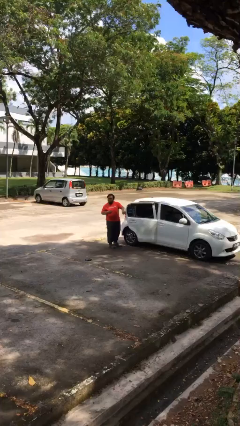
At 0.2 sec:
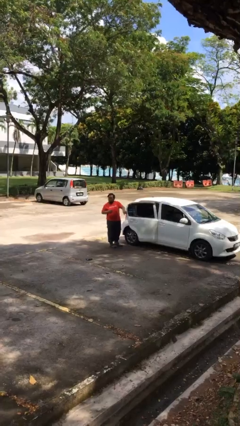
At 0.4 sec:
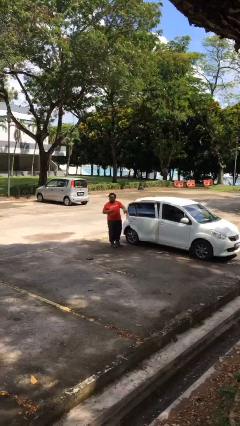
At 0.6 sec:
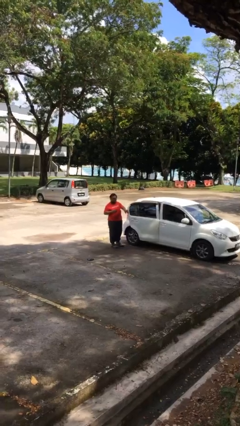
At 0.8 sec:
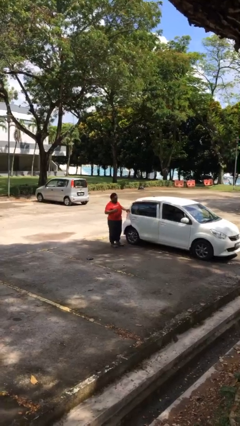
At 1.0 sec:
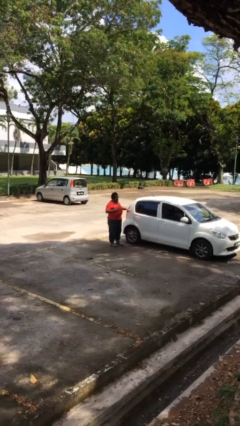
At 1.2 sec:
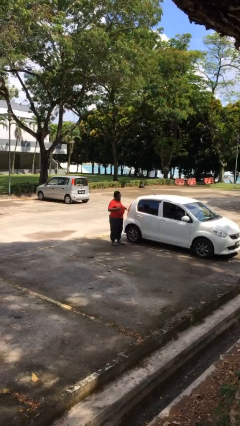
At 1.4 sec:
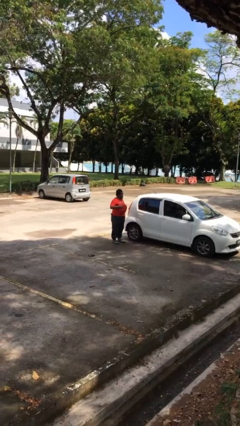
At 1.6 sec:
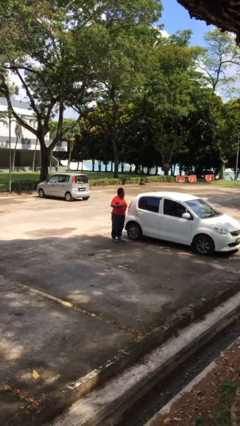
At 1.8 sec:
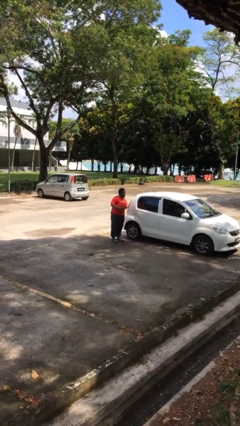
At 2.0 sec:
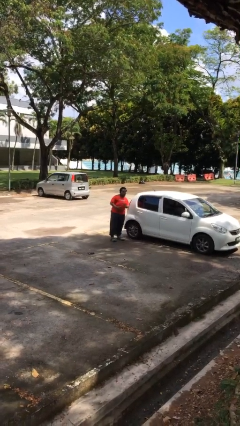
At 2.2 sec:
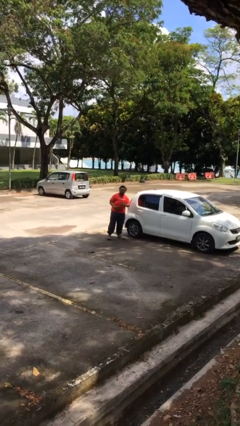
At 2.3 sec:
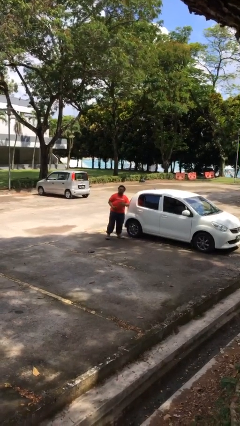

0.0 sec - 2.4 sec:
person closes car door

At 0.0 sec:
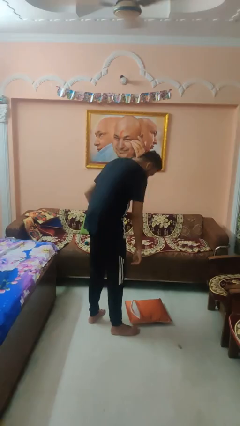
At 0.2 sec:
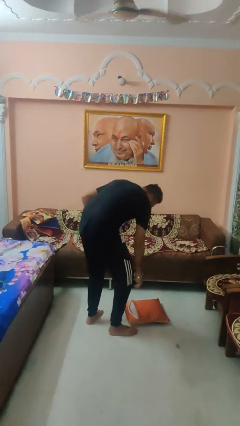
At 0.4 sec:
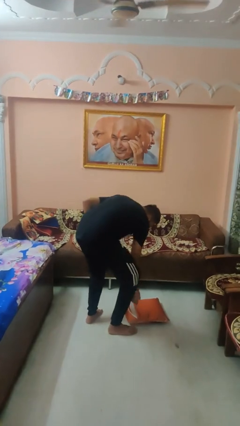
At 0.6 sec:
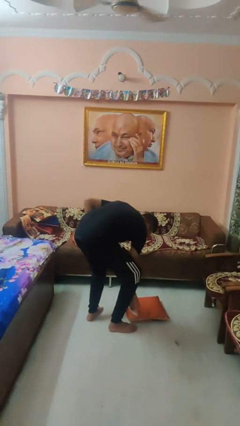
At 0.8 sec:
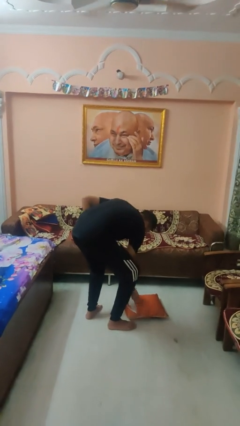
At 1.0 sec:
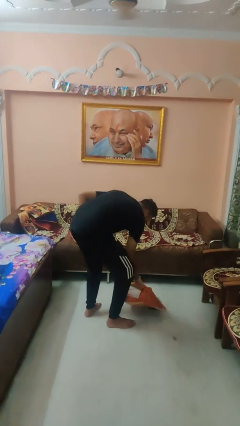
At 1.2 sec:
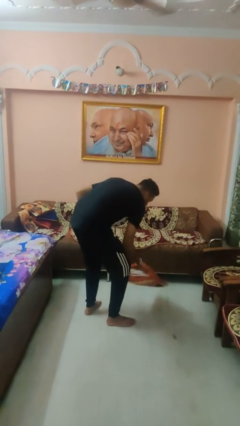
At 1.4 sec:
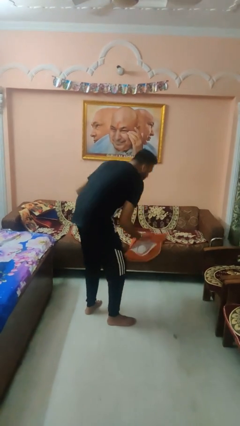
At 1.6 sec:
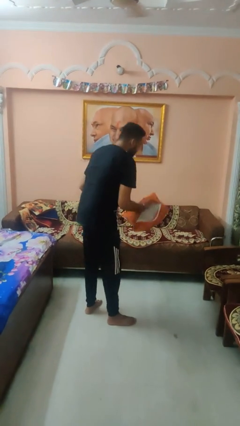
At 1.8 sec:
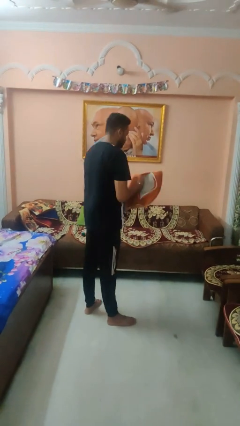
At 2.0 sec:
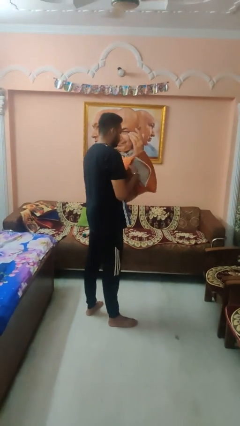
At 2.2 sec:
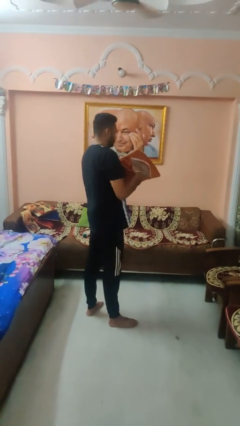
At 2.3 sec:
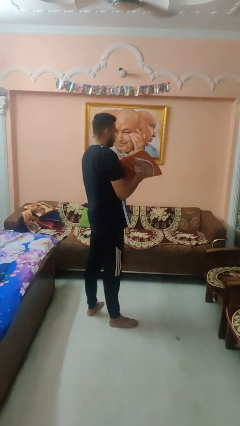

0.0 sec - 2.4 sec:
person picks up object from floor

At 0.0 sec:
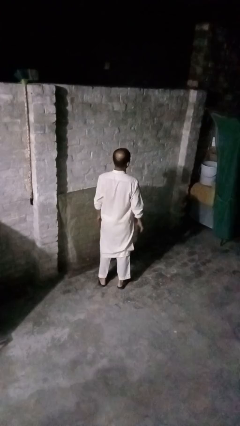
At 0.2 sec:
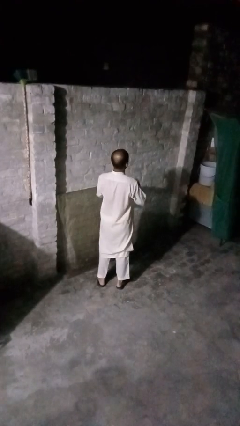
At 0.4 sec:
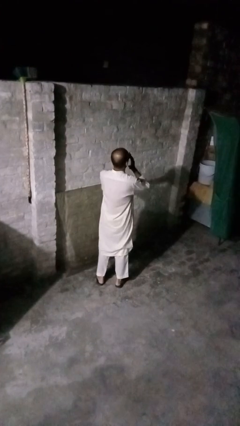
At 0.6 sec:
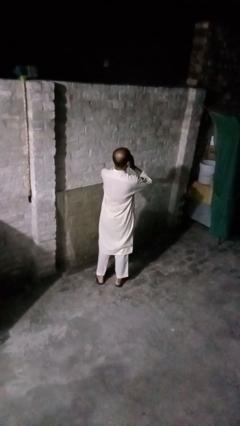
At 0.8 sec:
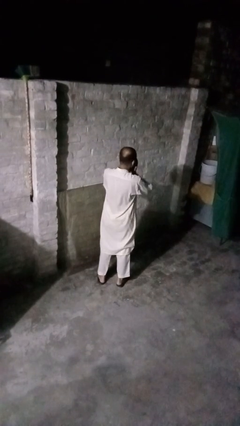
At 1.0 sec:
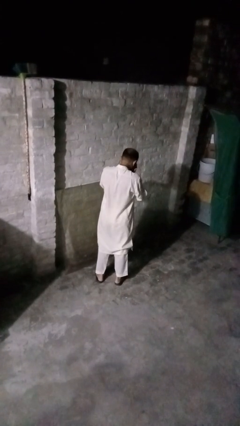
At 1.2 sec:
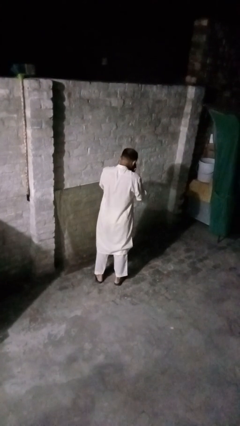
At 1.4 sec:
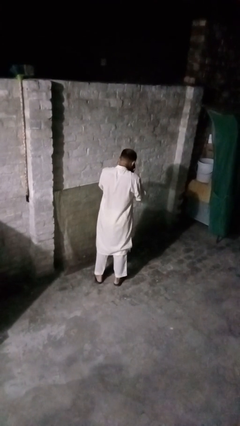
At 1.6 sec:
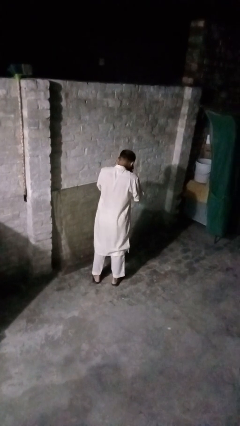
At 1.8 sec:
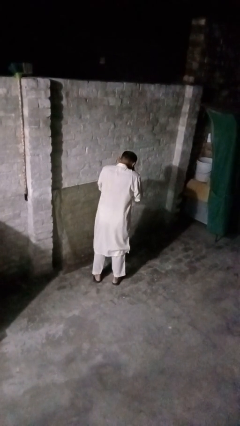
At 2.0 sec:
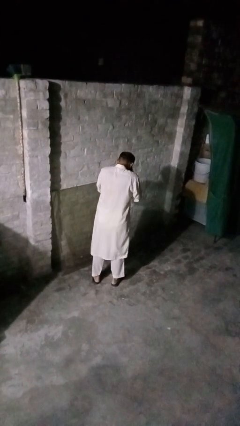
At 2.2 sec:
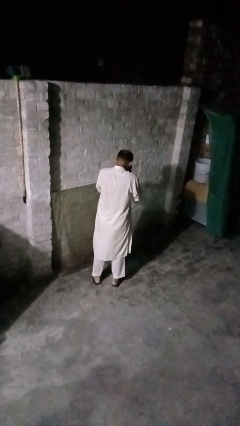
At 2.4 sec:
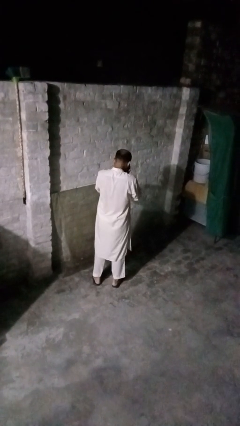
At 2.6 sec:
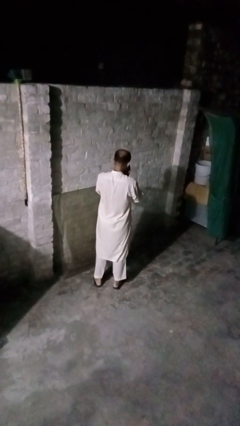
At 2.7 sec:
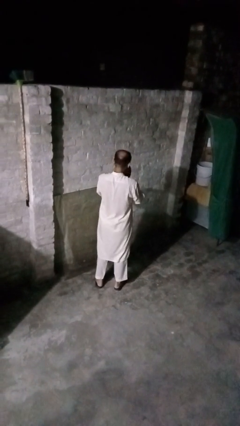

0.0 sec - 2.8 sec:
person sneezes into hand

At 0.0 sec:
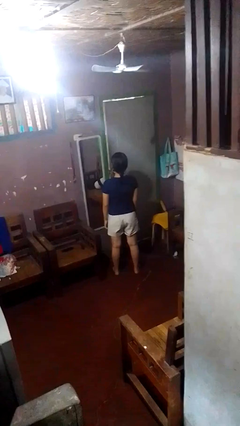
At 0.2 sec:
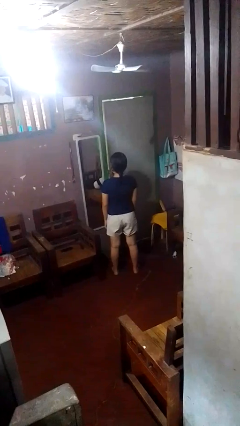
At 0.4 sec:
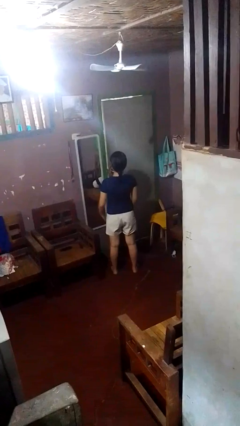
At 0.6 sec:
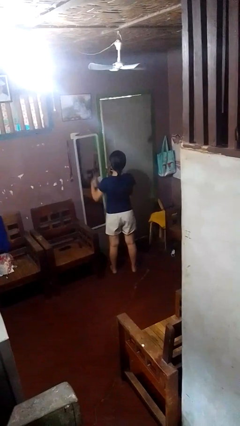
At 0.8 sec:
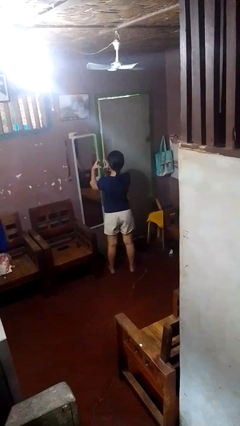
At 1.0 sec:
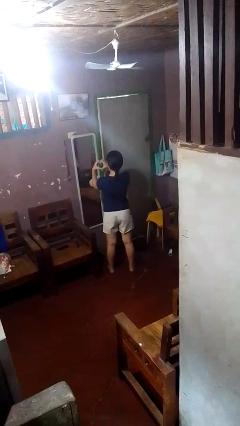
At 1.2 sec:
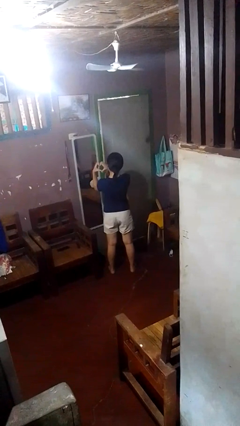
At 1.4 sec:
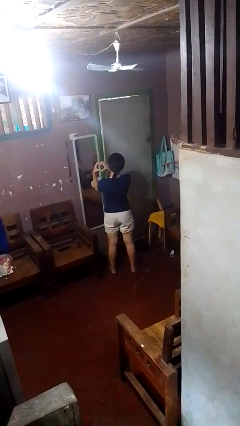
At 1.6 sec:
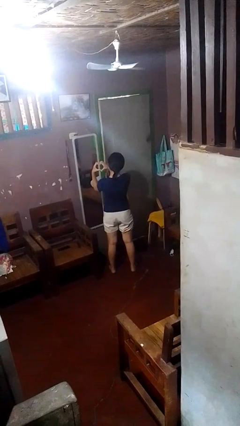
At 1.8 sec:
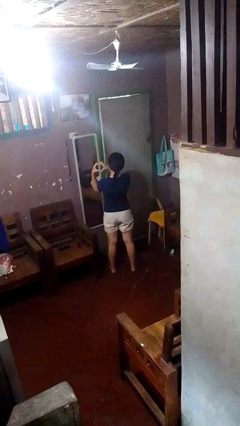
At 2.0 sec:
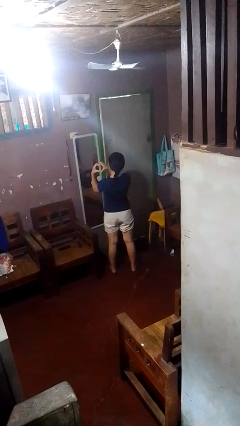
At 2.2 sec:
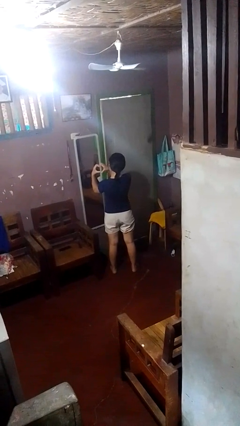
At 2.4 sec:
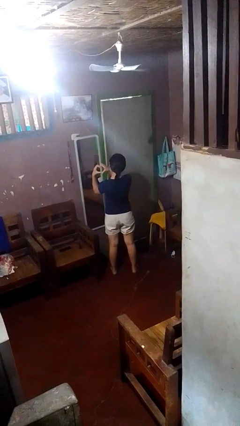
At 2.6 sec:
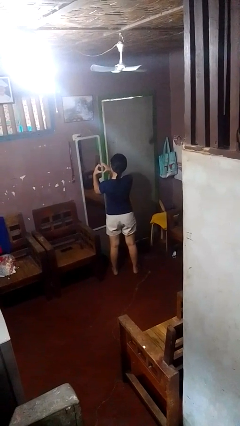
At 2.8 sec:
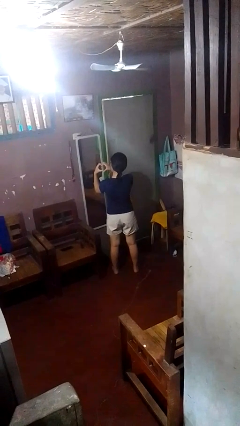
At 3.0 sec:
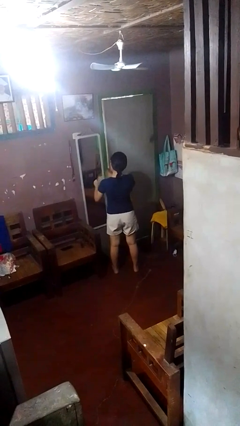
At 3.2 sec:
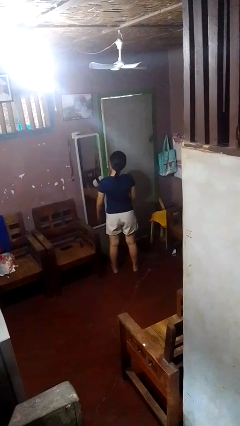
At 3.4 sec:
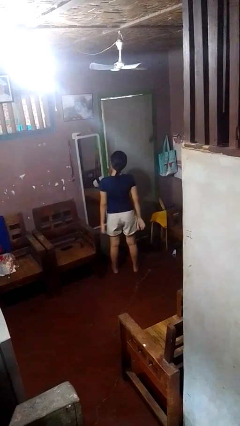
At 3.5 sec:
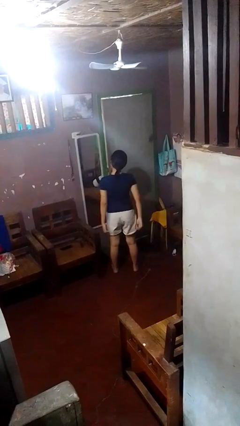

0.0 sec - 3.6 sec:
person gestures heart

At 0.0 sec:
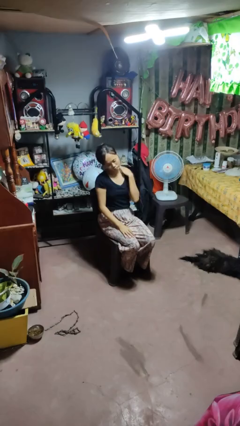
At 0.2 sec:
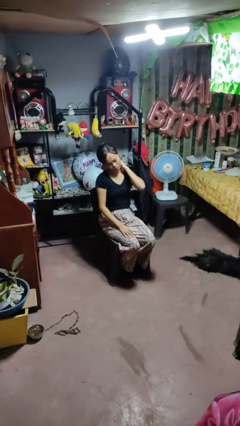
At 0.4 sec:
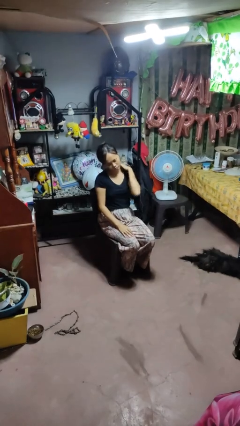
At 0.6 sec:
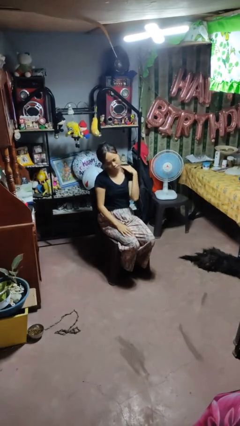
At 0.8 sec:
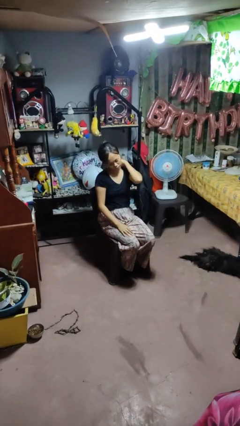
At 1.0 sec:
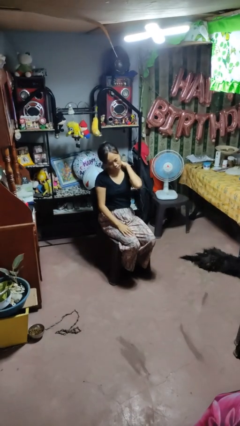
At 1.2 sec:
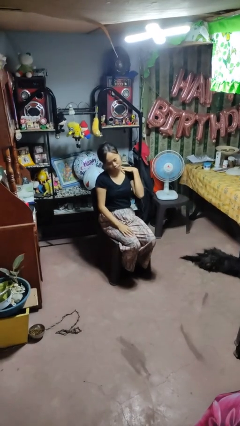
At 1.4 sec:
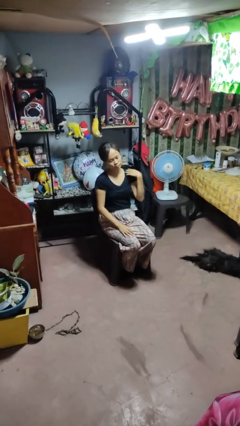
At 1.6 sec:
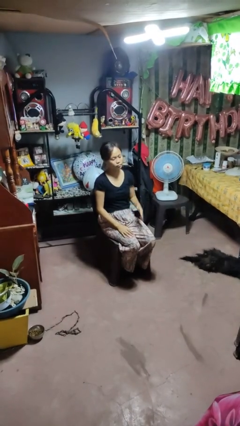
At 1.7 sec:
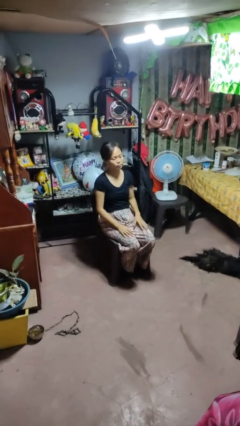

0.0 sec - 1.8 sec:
person rubs neck

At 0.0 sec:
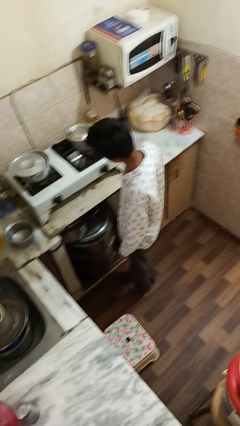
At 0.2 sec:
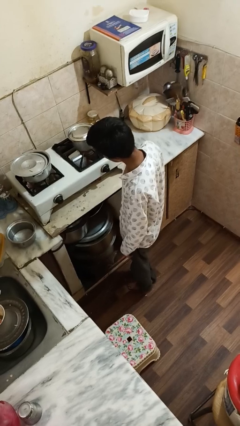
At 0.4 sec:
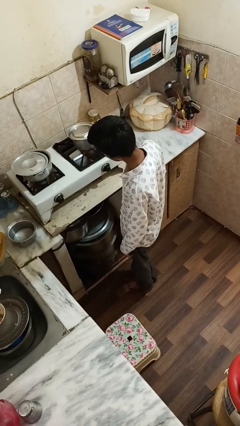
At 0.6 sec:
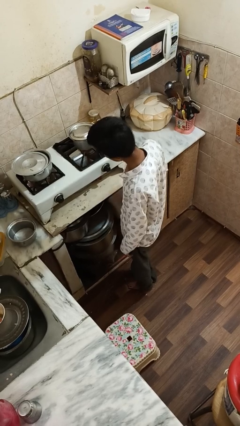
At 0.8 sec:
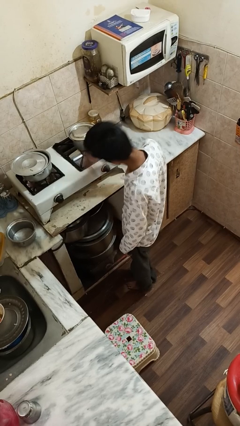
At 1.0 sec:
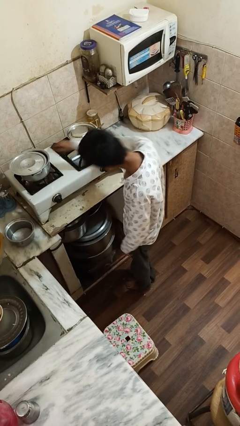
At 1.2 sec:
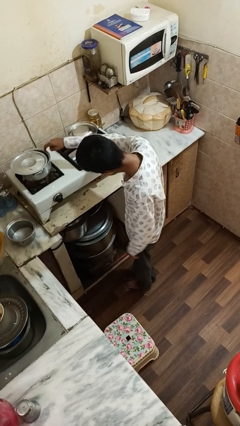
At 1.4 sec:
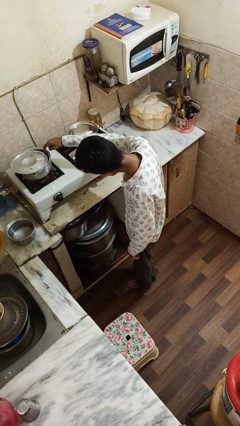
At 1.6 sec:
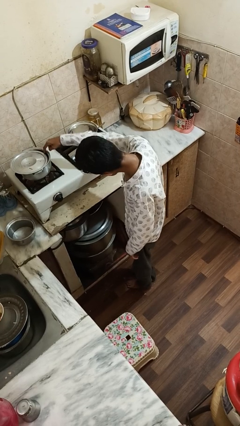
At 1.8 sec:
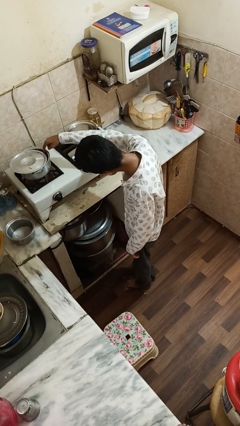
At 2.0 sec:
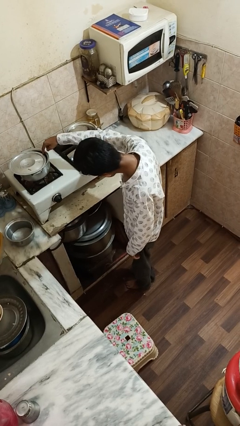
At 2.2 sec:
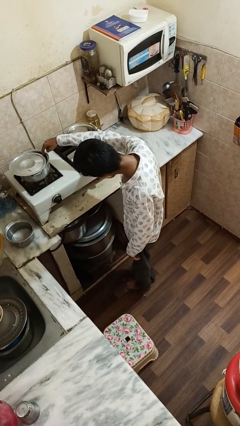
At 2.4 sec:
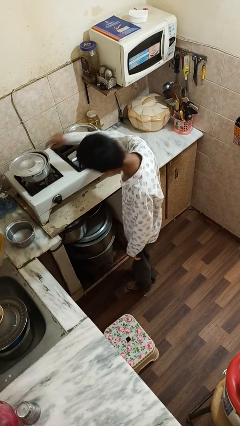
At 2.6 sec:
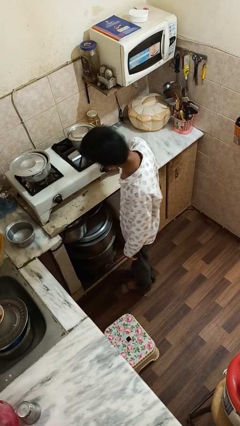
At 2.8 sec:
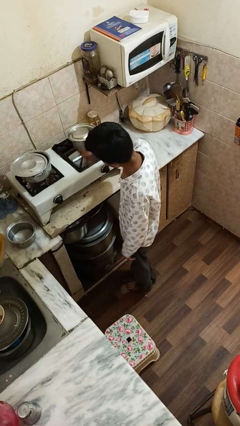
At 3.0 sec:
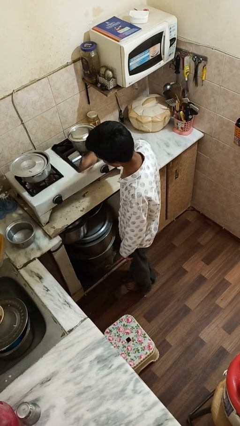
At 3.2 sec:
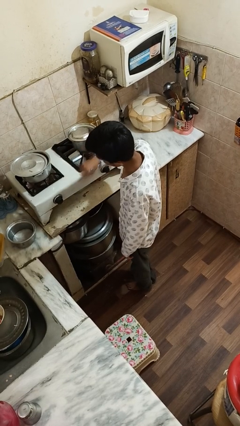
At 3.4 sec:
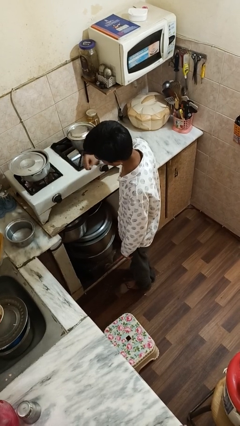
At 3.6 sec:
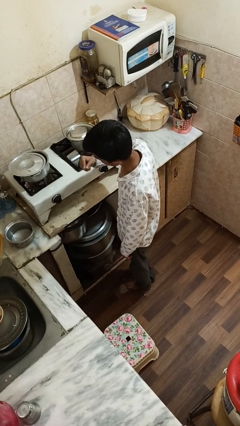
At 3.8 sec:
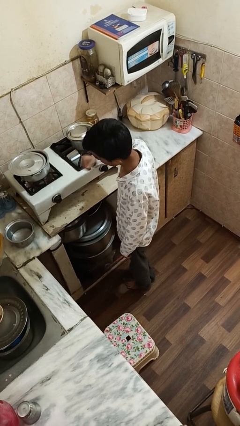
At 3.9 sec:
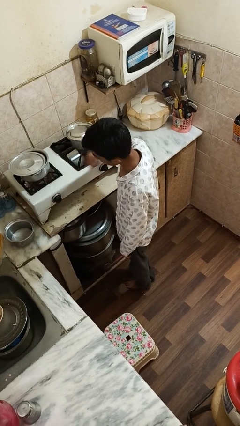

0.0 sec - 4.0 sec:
person burns hand
